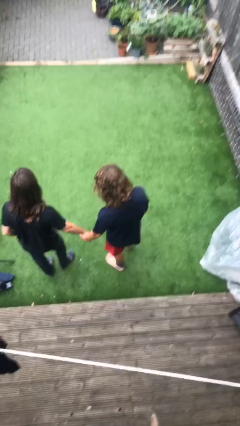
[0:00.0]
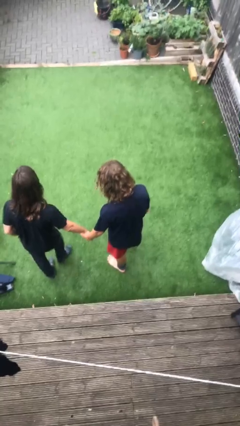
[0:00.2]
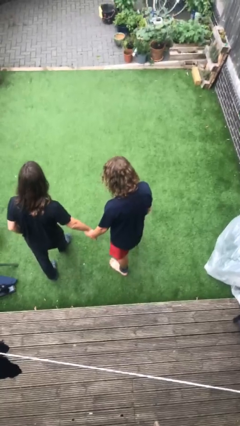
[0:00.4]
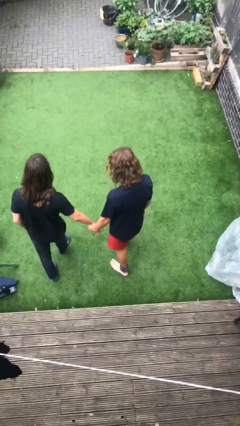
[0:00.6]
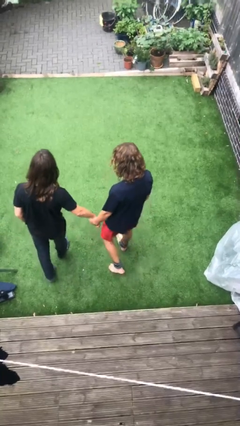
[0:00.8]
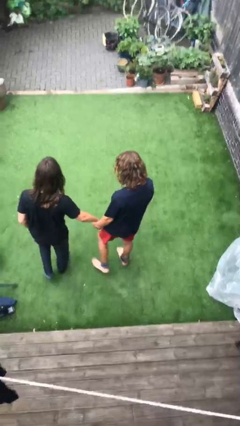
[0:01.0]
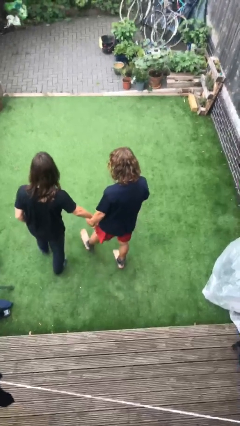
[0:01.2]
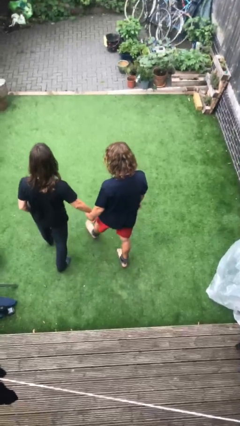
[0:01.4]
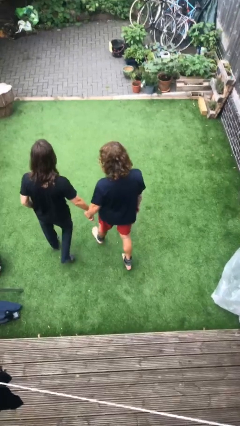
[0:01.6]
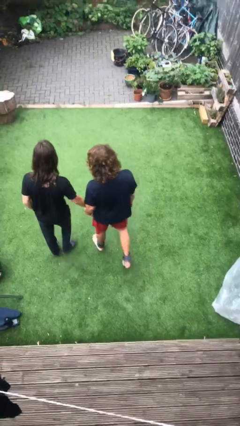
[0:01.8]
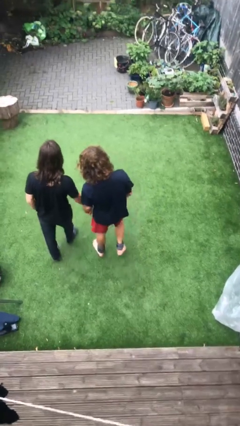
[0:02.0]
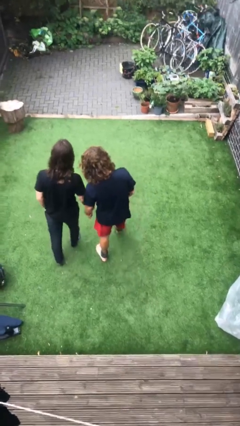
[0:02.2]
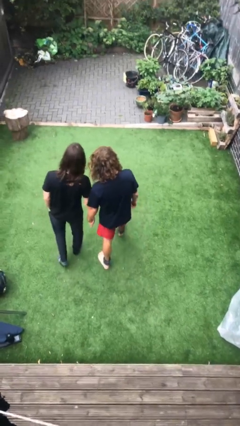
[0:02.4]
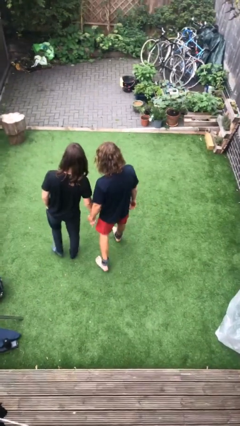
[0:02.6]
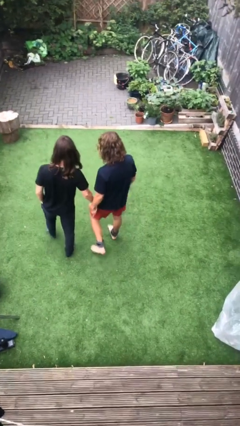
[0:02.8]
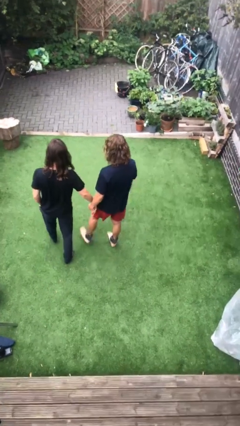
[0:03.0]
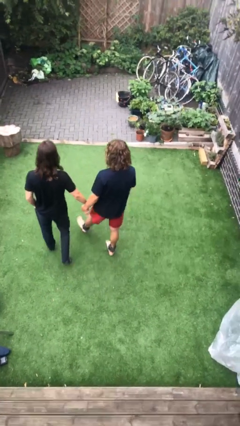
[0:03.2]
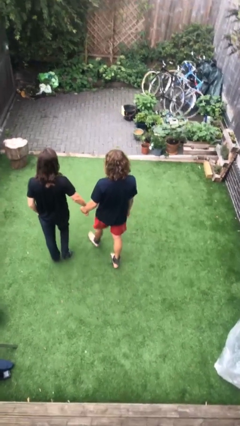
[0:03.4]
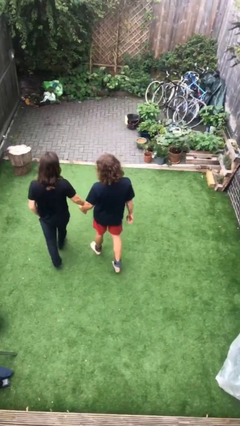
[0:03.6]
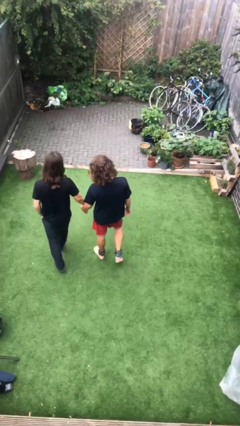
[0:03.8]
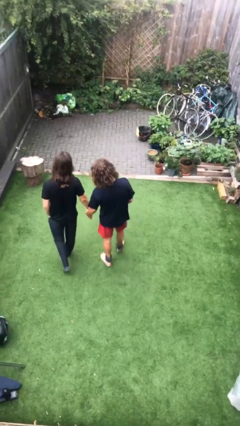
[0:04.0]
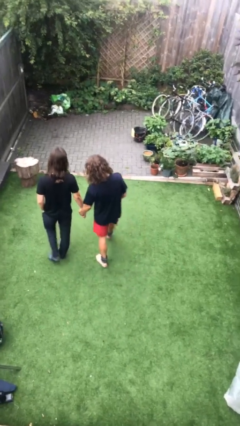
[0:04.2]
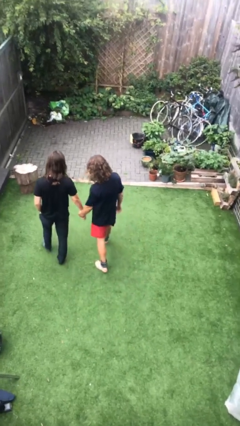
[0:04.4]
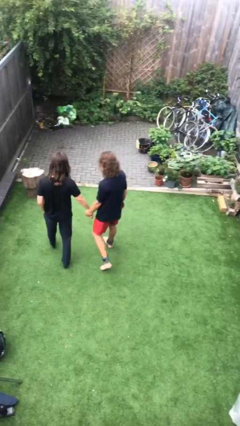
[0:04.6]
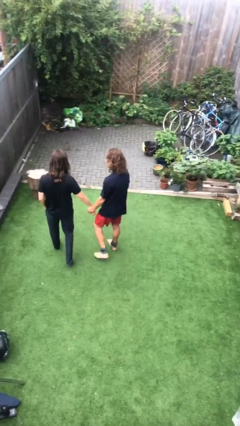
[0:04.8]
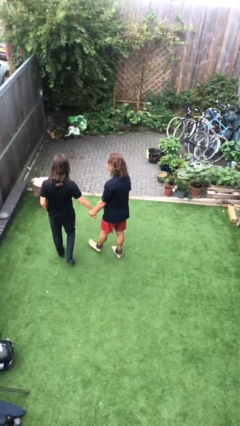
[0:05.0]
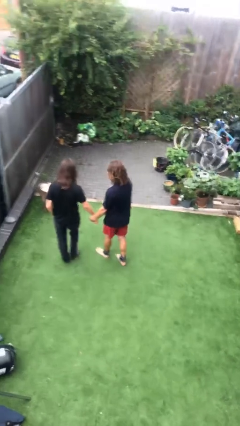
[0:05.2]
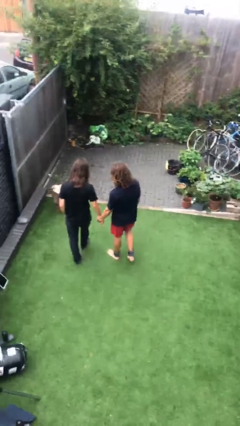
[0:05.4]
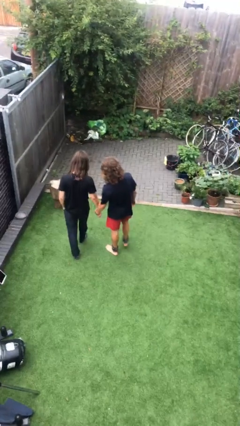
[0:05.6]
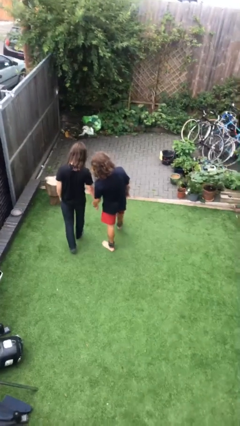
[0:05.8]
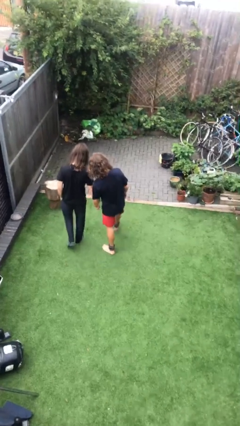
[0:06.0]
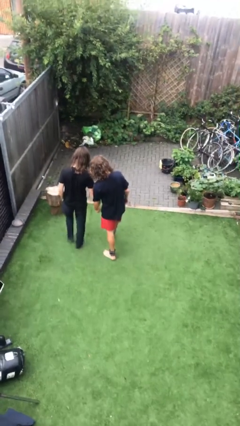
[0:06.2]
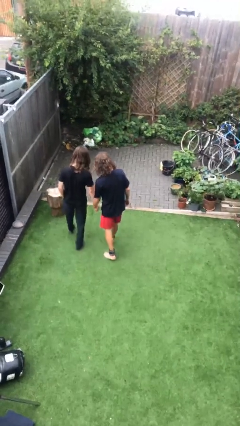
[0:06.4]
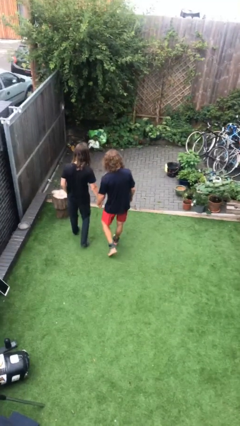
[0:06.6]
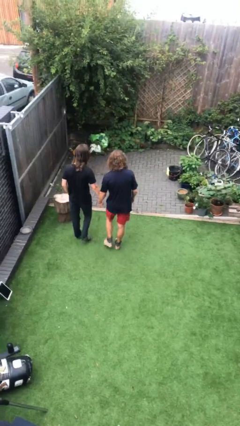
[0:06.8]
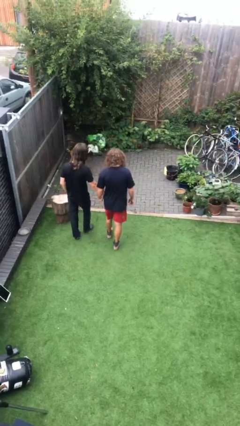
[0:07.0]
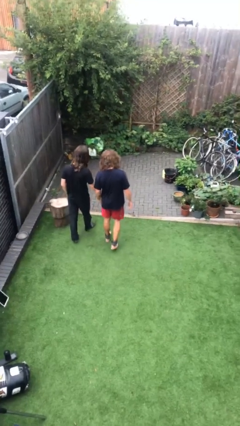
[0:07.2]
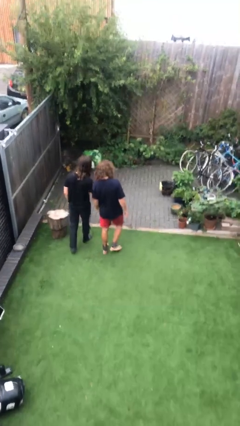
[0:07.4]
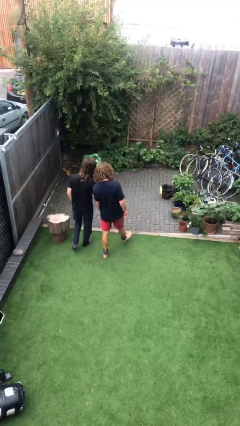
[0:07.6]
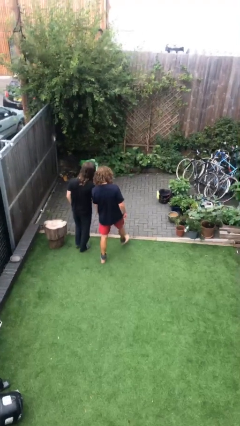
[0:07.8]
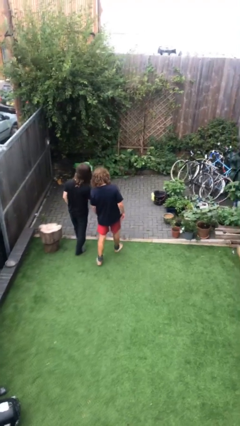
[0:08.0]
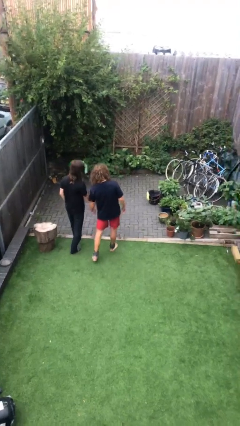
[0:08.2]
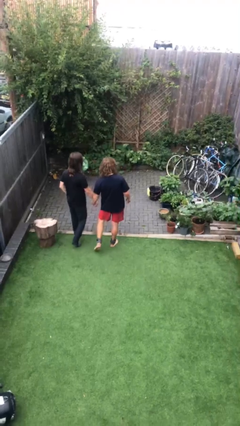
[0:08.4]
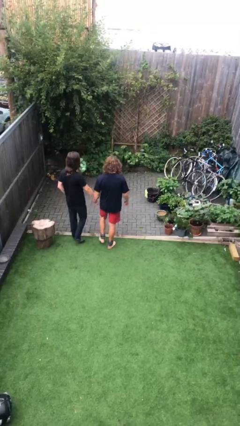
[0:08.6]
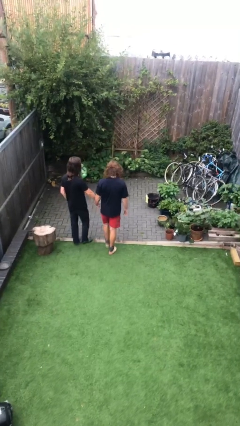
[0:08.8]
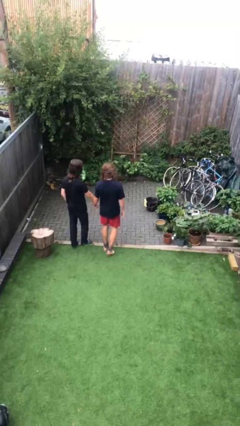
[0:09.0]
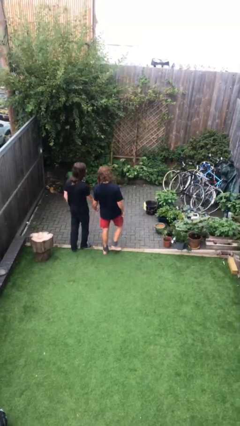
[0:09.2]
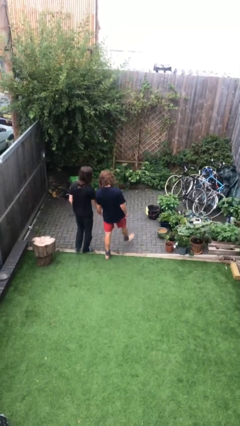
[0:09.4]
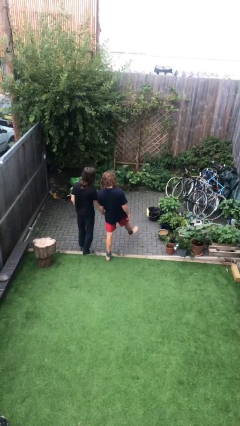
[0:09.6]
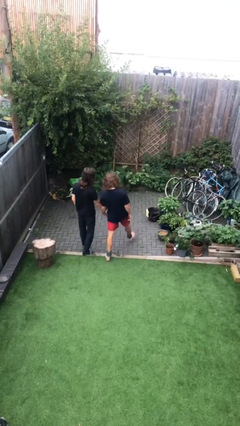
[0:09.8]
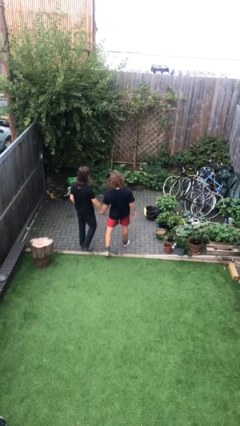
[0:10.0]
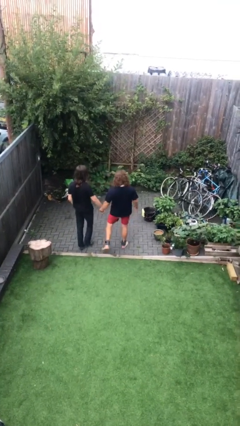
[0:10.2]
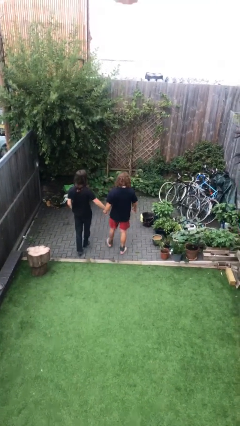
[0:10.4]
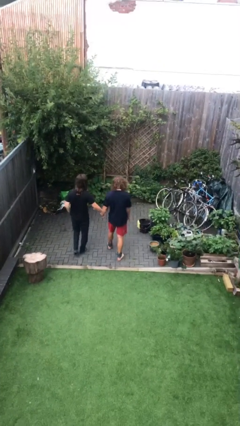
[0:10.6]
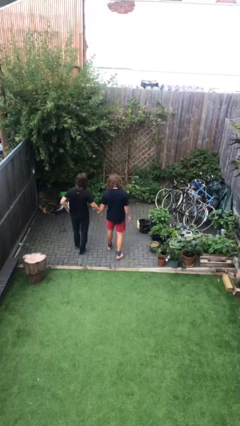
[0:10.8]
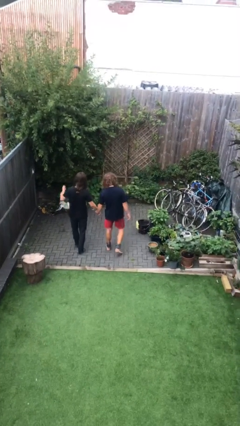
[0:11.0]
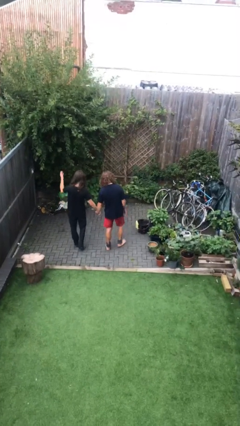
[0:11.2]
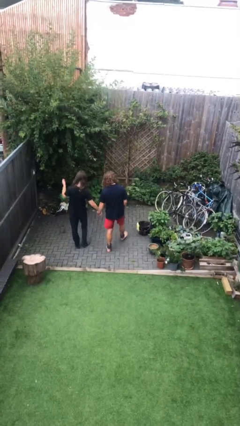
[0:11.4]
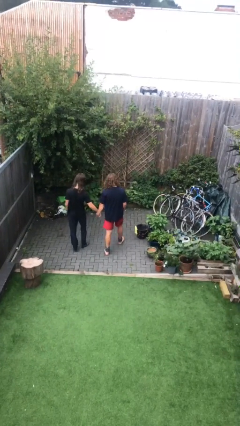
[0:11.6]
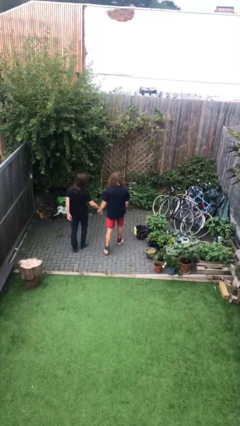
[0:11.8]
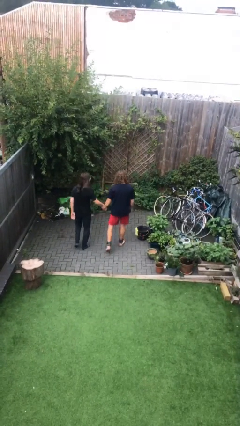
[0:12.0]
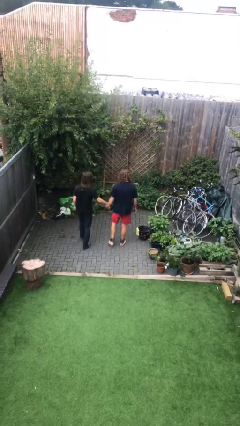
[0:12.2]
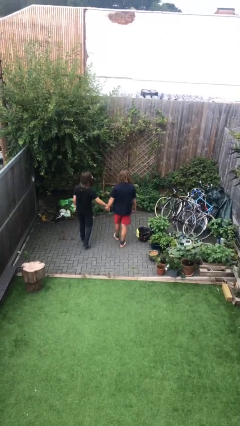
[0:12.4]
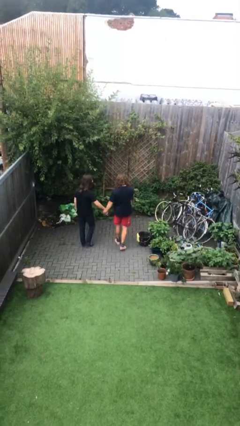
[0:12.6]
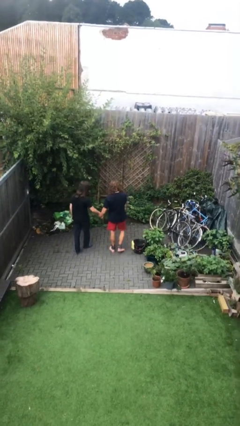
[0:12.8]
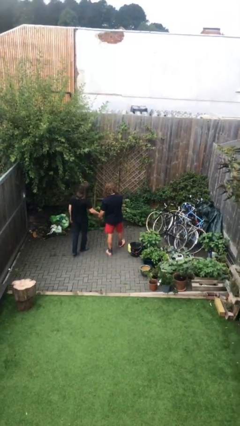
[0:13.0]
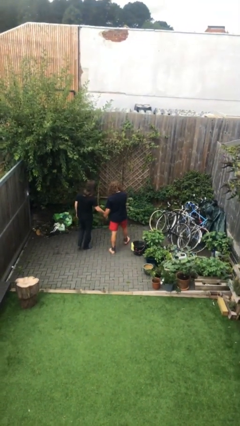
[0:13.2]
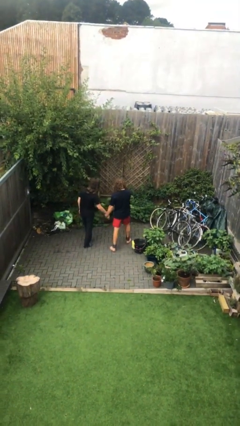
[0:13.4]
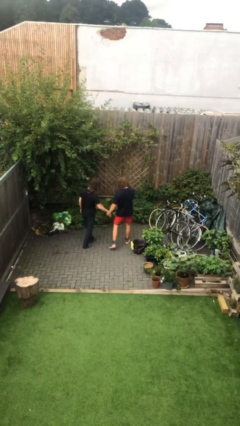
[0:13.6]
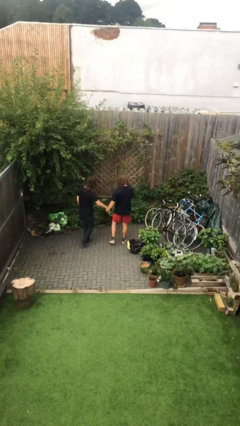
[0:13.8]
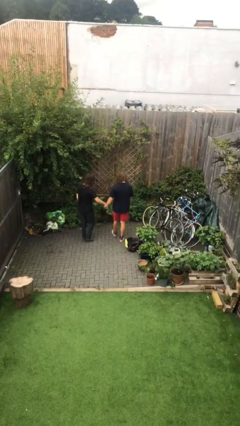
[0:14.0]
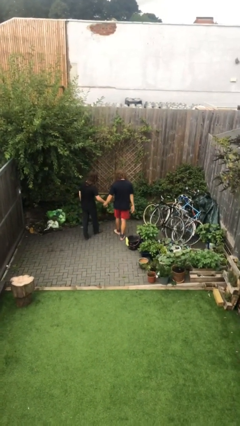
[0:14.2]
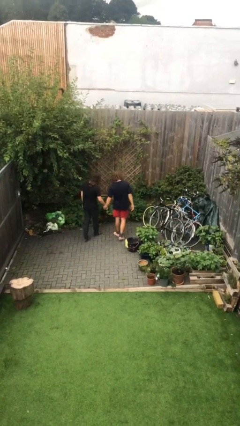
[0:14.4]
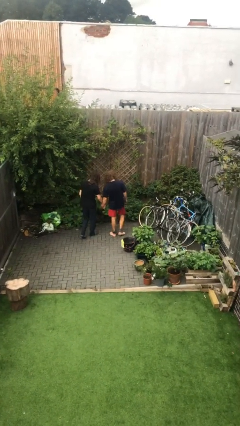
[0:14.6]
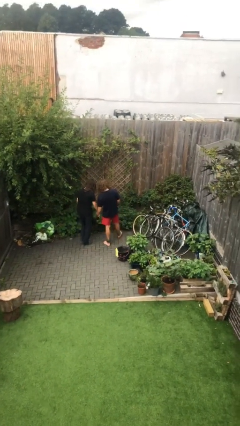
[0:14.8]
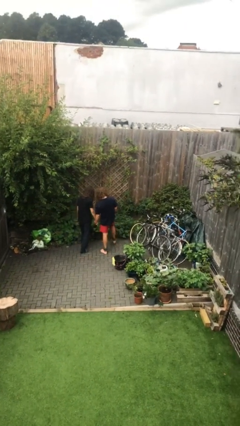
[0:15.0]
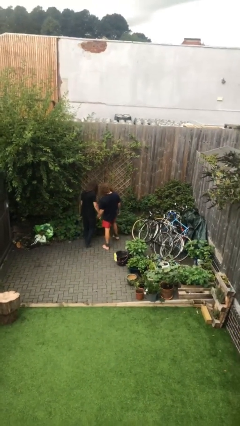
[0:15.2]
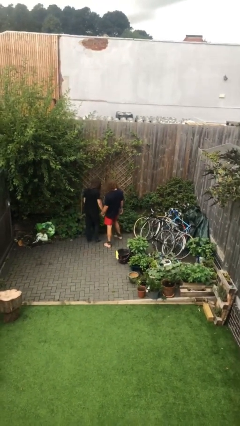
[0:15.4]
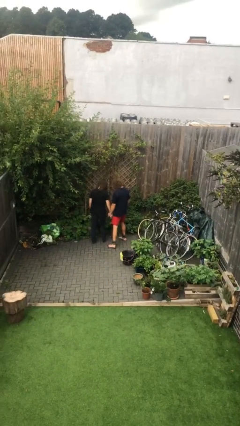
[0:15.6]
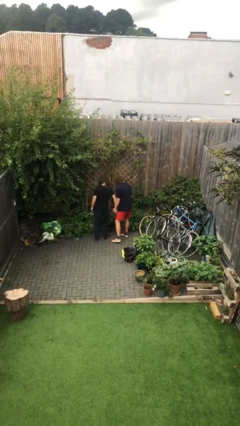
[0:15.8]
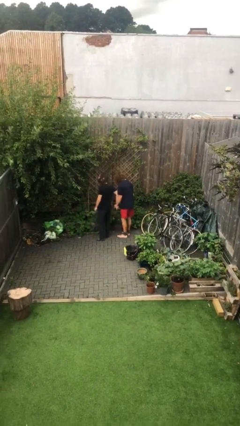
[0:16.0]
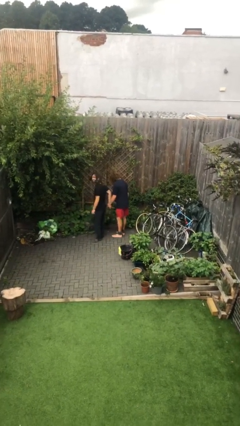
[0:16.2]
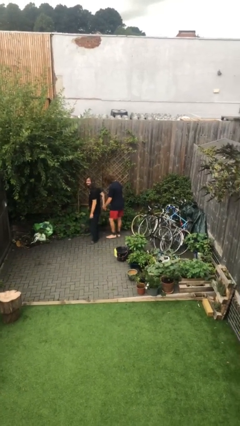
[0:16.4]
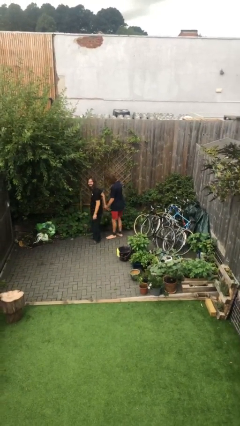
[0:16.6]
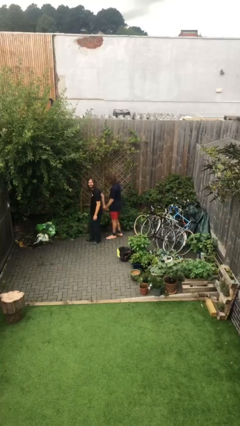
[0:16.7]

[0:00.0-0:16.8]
person holds hand

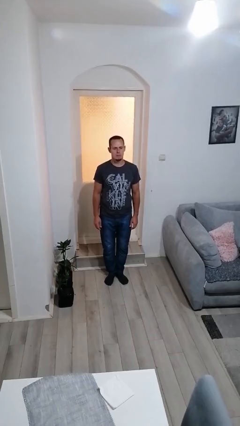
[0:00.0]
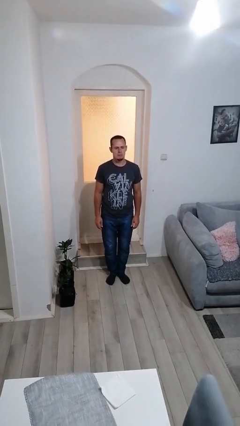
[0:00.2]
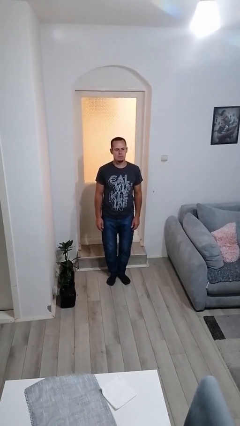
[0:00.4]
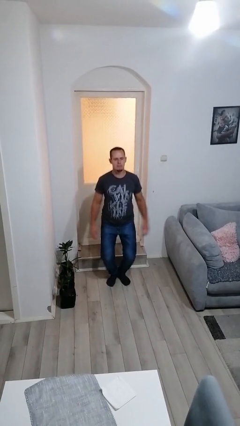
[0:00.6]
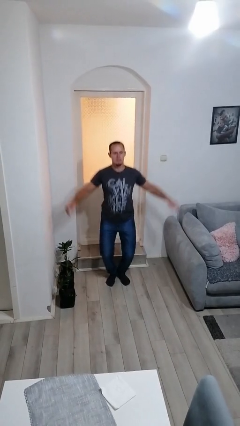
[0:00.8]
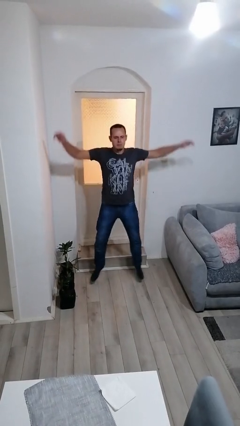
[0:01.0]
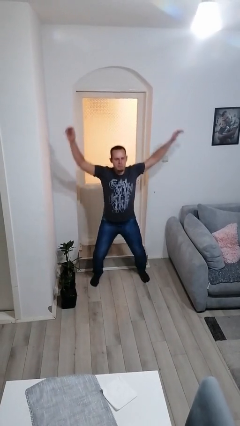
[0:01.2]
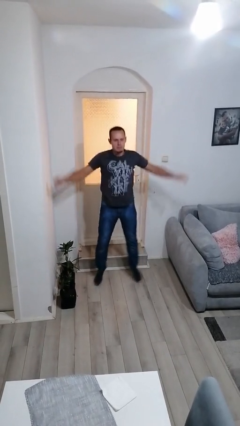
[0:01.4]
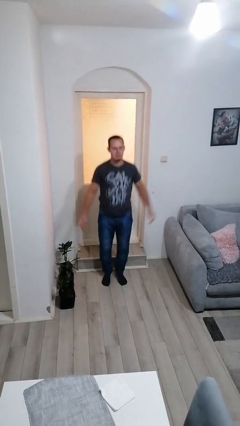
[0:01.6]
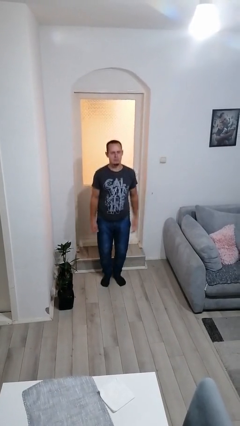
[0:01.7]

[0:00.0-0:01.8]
person exercises with jumping jacks
